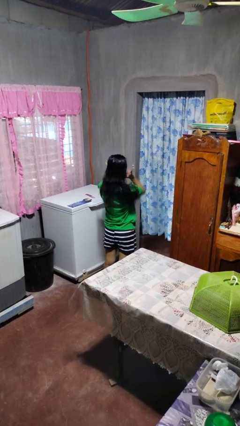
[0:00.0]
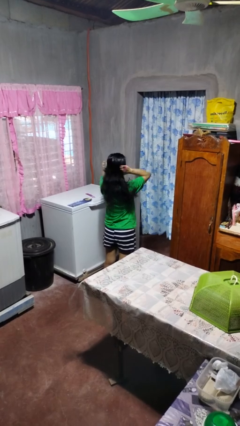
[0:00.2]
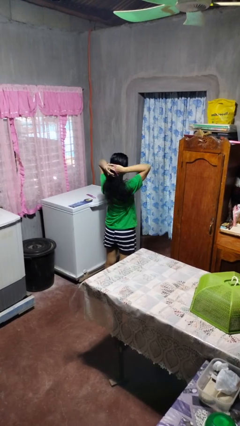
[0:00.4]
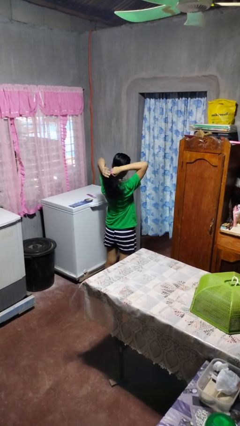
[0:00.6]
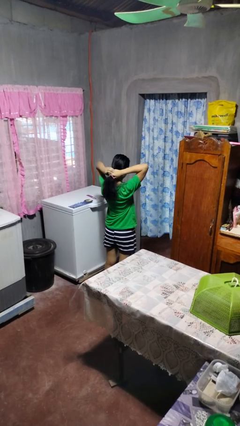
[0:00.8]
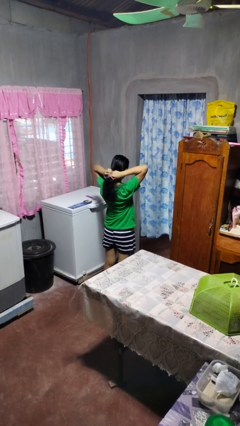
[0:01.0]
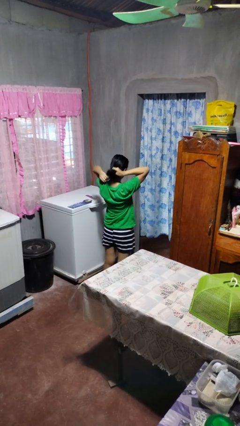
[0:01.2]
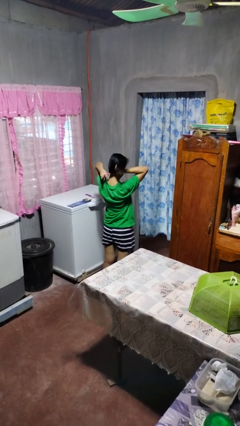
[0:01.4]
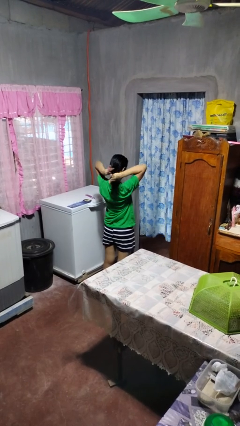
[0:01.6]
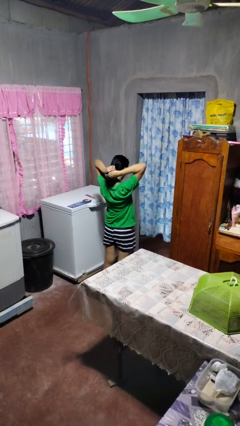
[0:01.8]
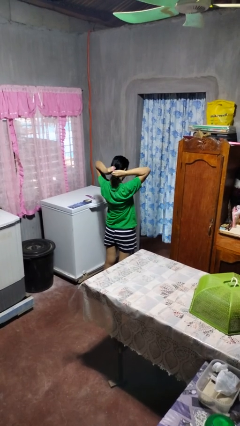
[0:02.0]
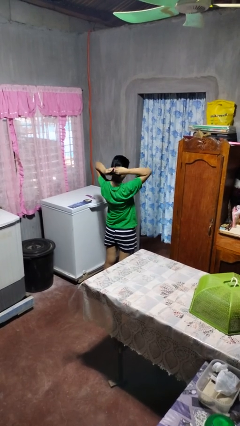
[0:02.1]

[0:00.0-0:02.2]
person puts hair in ponytail

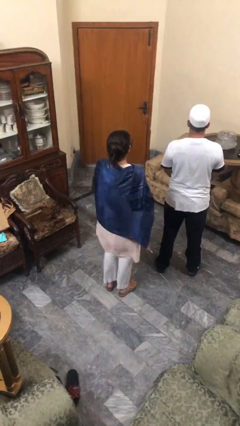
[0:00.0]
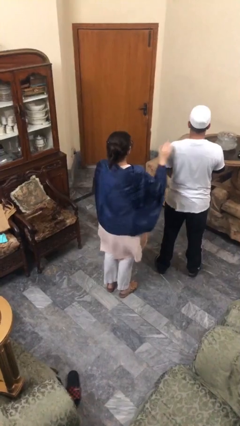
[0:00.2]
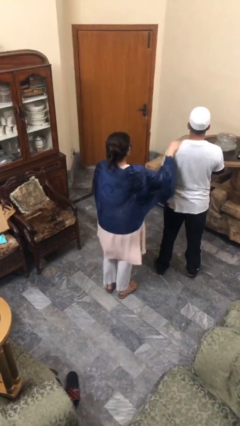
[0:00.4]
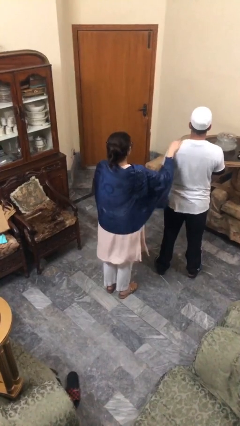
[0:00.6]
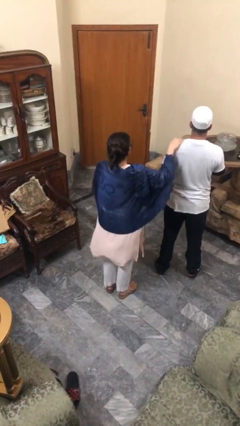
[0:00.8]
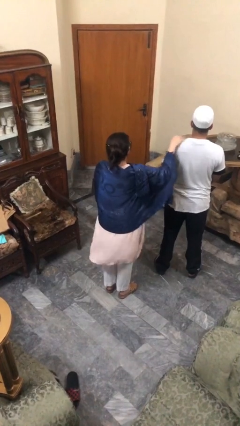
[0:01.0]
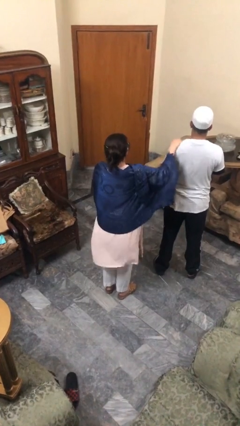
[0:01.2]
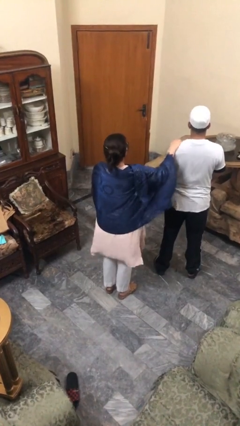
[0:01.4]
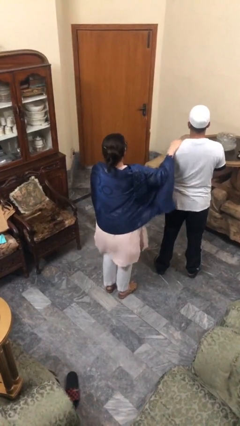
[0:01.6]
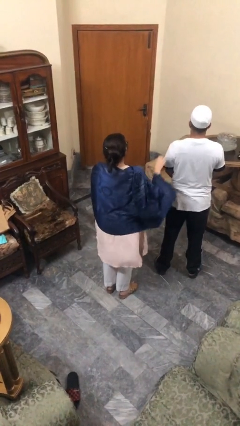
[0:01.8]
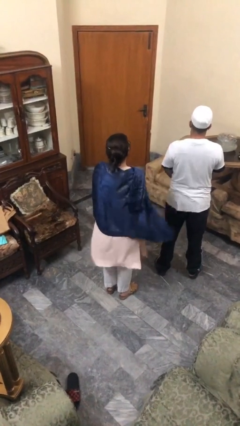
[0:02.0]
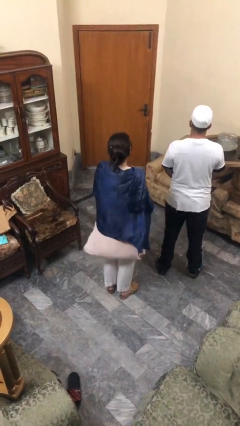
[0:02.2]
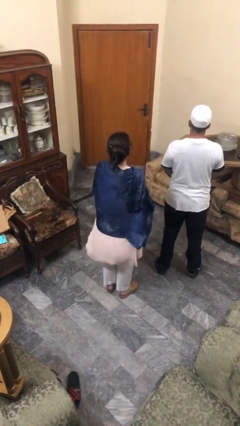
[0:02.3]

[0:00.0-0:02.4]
person pounds shoulders of person

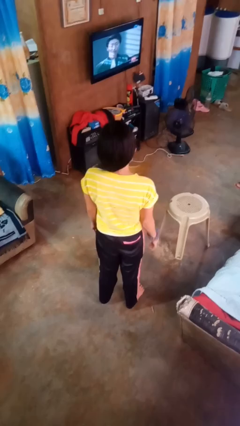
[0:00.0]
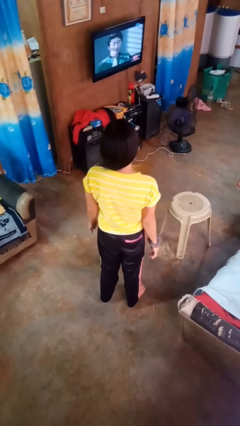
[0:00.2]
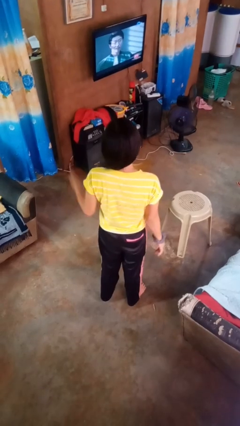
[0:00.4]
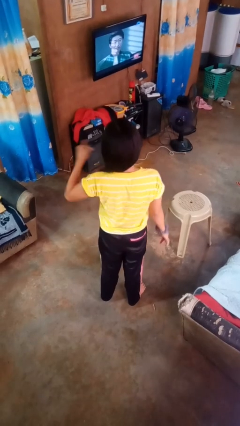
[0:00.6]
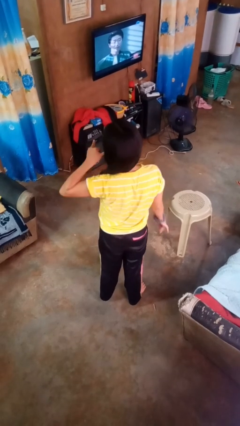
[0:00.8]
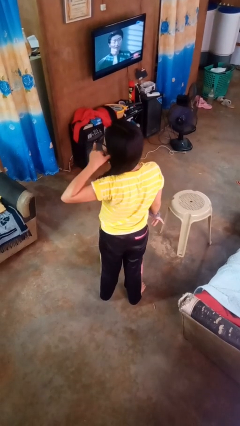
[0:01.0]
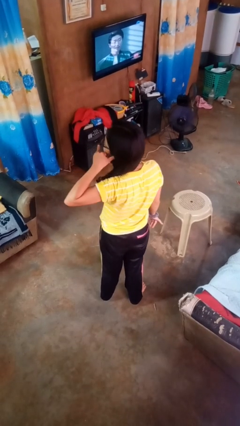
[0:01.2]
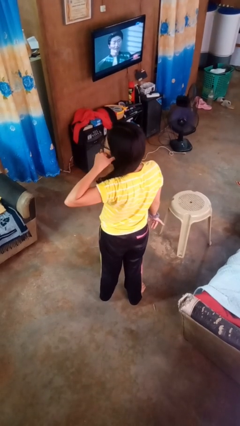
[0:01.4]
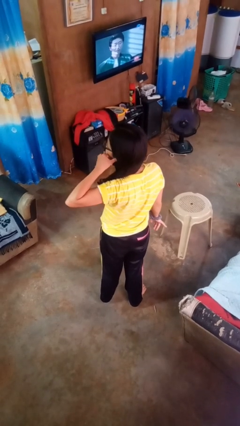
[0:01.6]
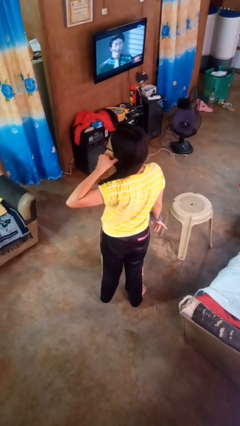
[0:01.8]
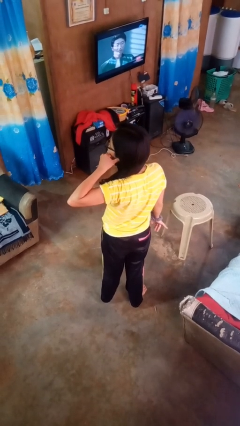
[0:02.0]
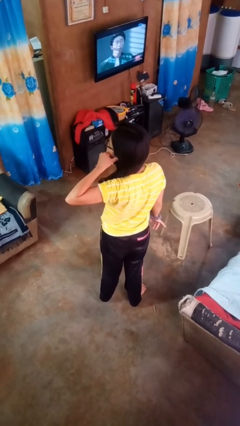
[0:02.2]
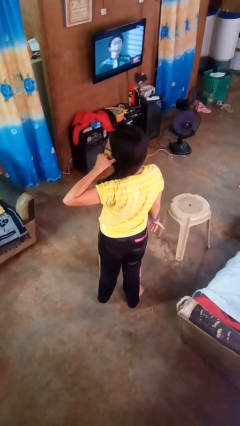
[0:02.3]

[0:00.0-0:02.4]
person gestures call me

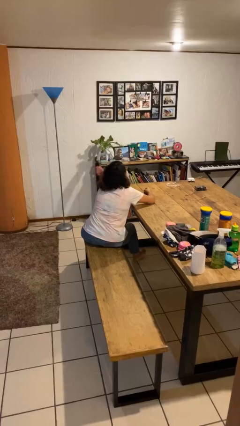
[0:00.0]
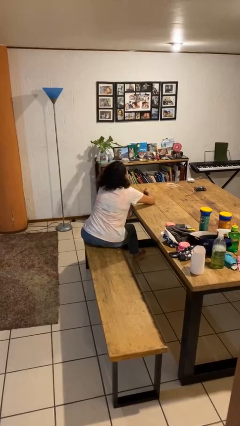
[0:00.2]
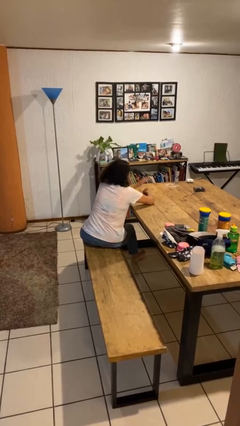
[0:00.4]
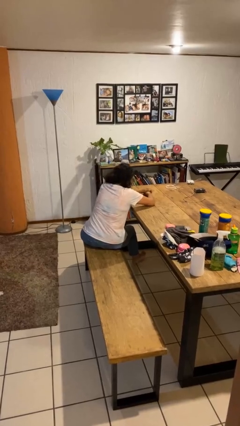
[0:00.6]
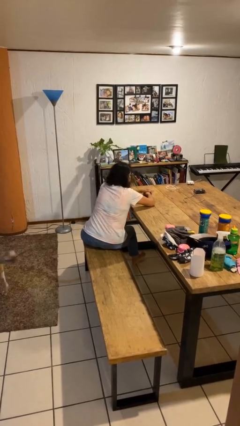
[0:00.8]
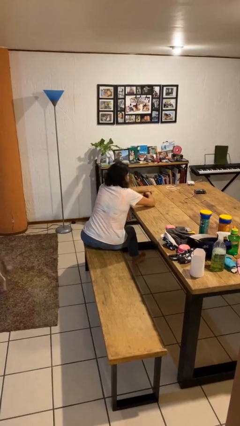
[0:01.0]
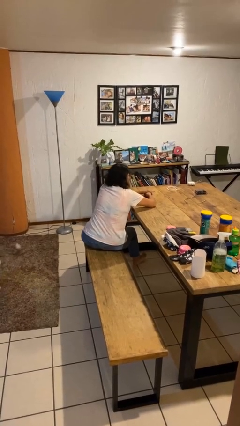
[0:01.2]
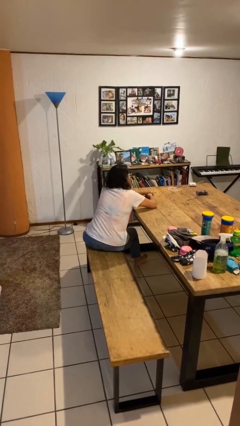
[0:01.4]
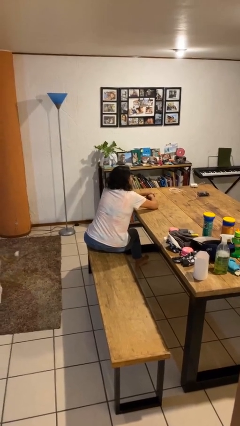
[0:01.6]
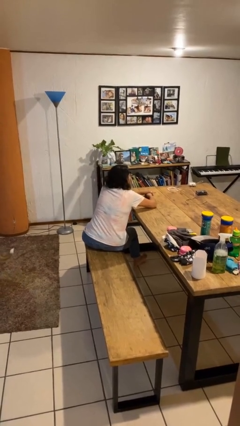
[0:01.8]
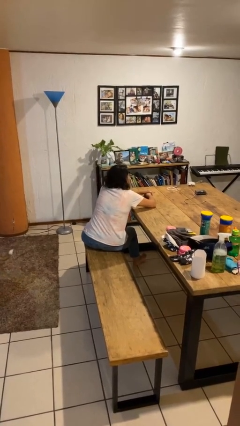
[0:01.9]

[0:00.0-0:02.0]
person nods head

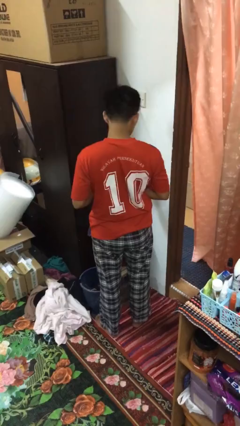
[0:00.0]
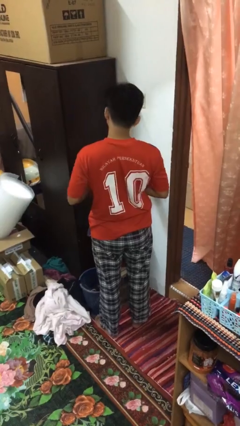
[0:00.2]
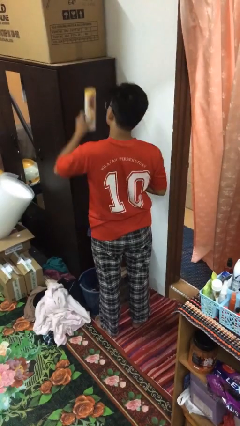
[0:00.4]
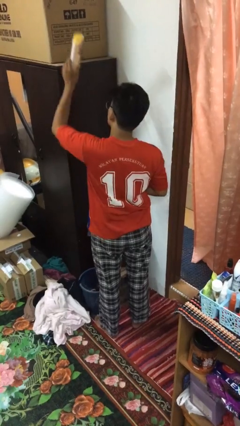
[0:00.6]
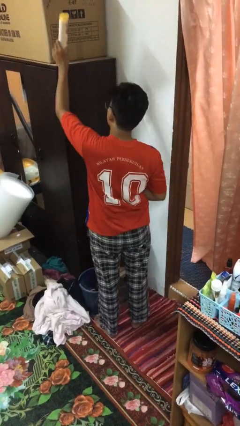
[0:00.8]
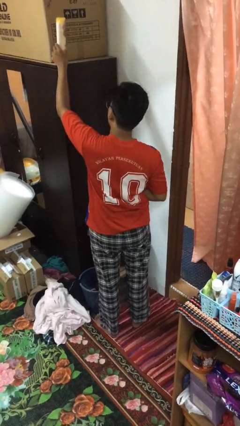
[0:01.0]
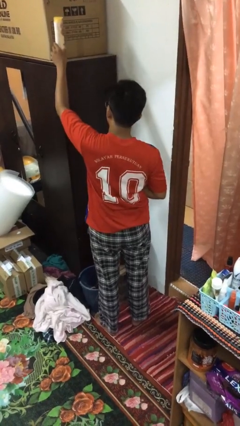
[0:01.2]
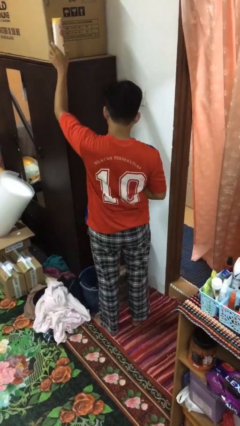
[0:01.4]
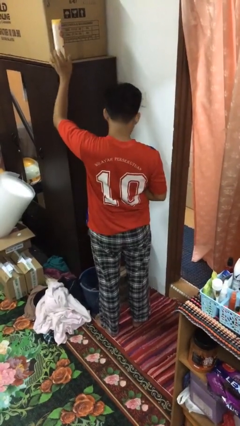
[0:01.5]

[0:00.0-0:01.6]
person puts down object on shelf

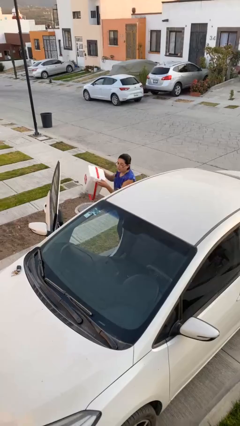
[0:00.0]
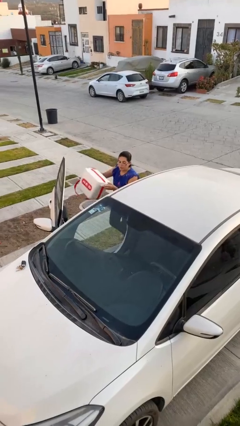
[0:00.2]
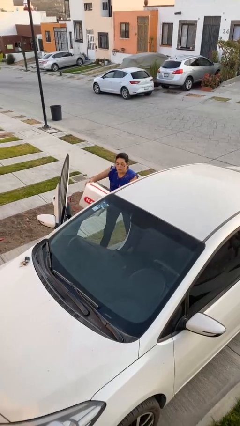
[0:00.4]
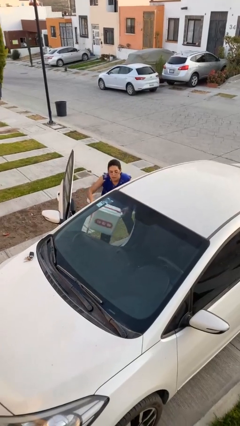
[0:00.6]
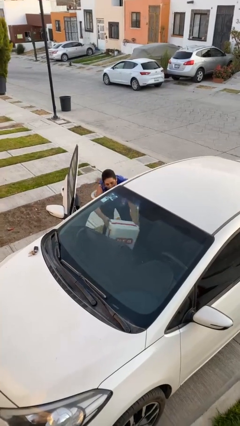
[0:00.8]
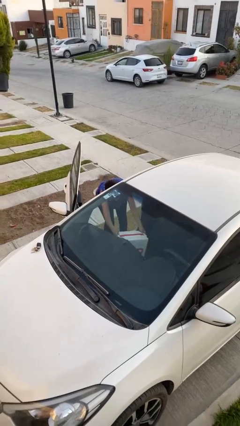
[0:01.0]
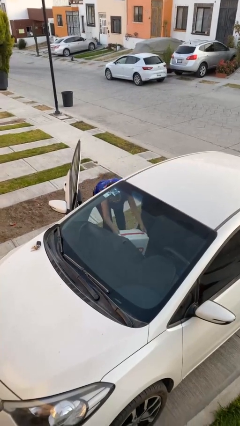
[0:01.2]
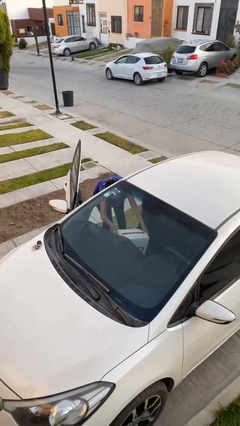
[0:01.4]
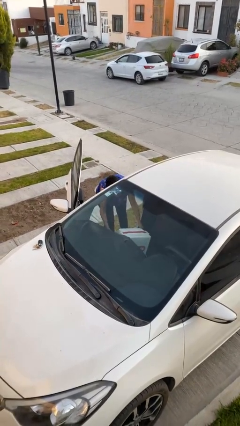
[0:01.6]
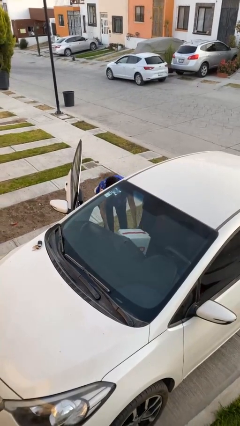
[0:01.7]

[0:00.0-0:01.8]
person loads car

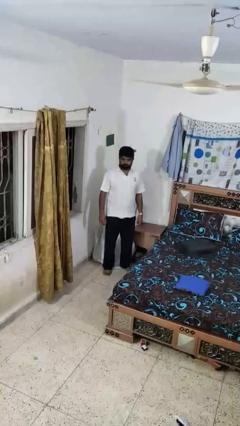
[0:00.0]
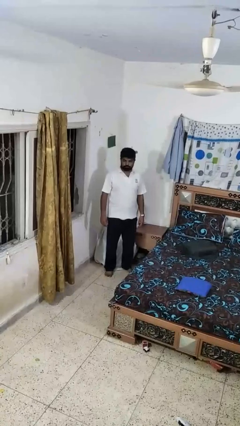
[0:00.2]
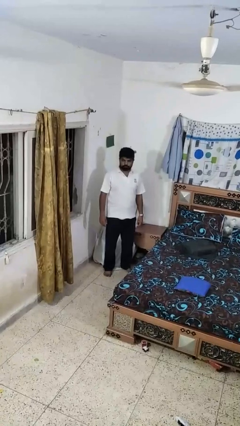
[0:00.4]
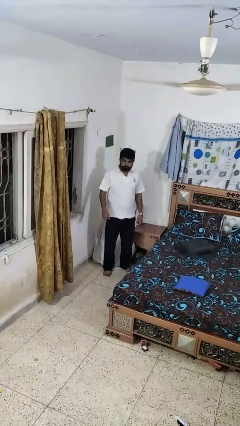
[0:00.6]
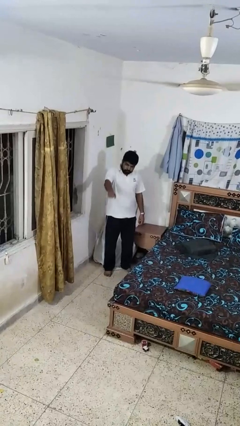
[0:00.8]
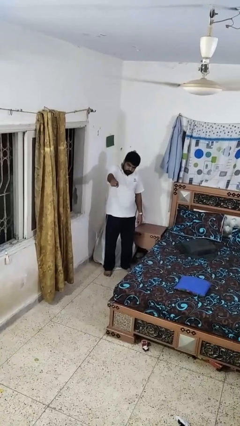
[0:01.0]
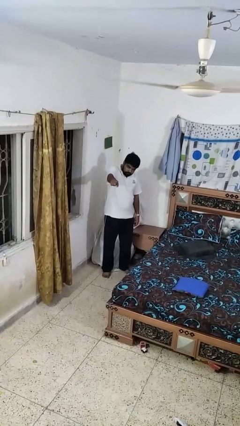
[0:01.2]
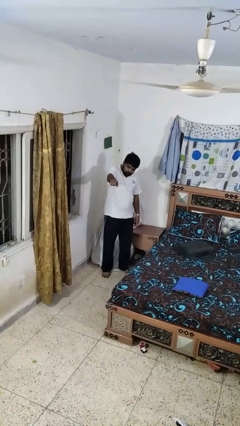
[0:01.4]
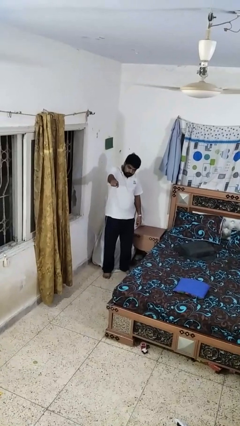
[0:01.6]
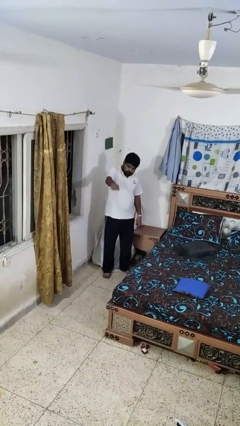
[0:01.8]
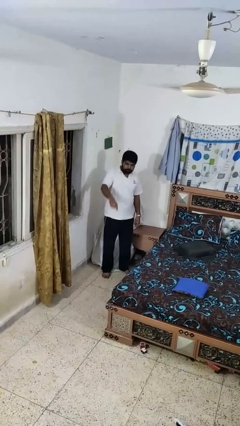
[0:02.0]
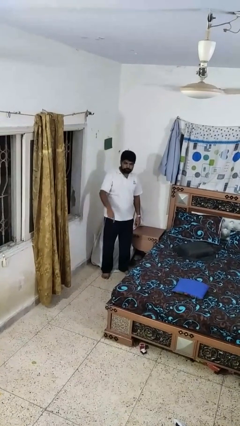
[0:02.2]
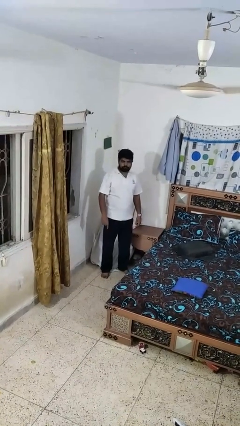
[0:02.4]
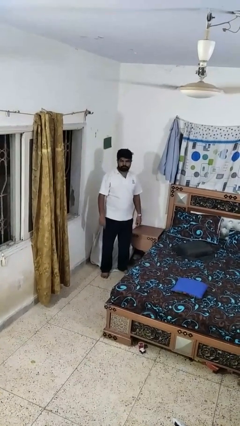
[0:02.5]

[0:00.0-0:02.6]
person points at person

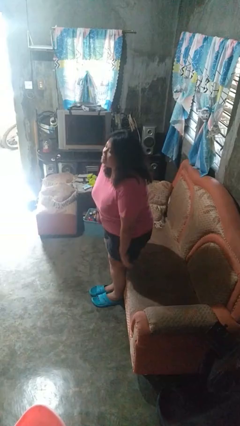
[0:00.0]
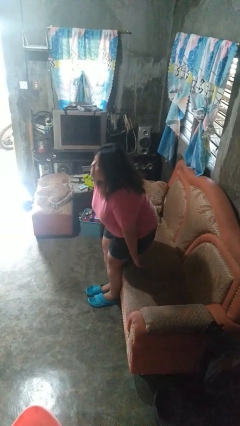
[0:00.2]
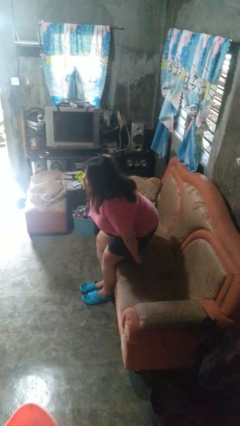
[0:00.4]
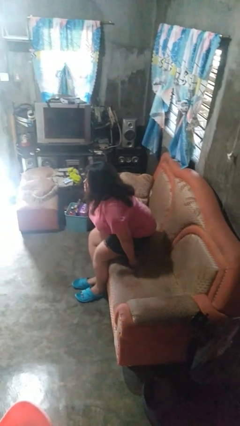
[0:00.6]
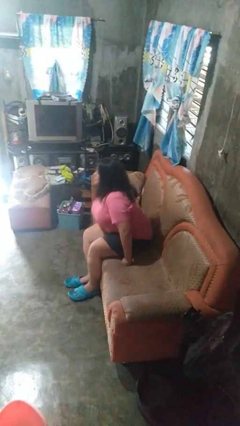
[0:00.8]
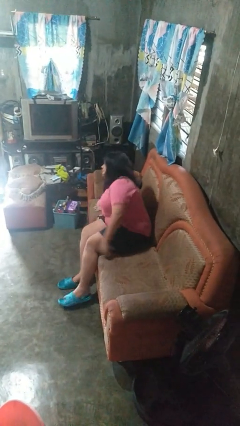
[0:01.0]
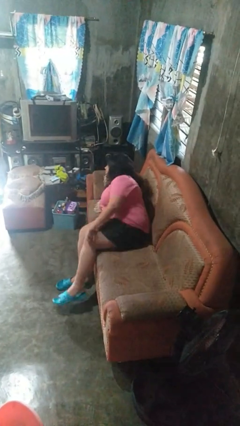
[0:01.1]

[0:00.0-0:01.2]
person lies down on couch

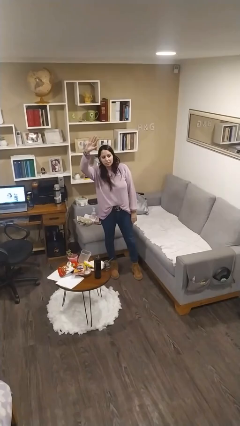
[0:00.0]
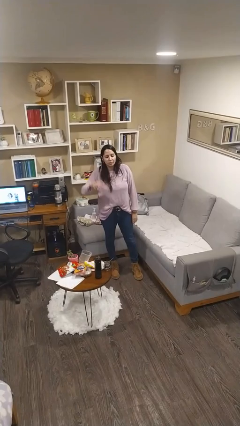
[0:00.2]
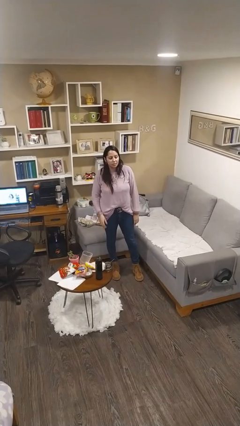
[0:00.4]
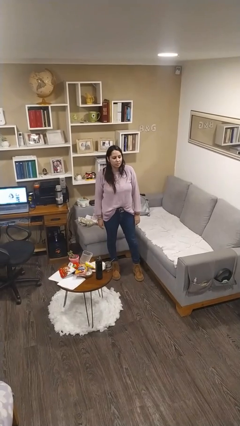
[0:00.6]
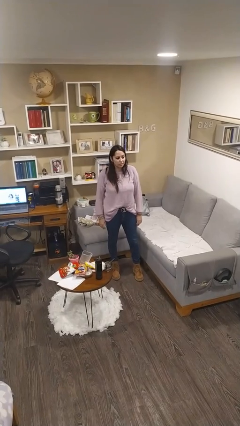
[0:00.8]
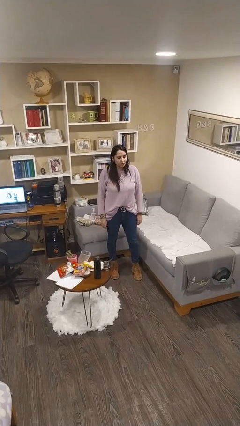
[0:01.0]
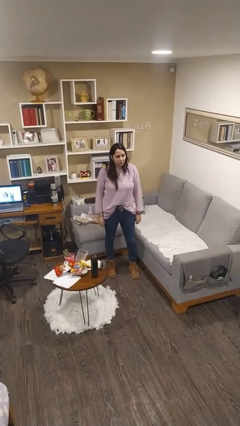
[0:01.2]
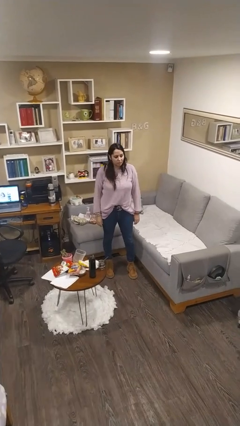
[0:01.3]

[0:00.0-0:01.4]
person gestures lower hand
